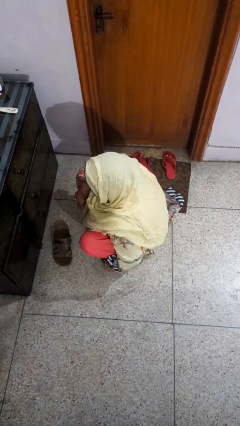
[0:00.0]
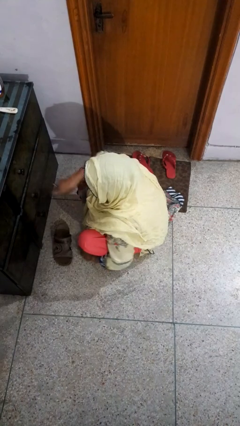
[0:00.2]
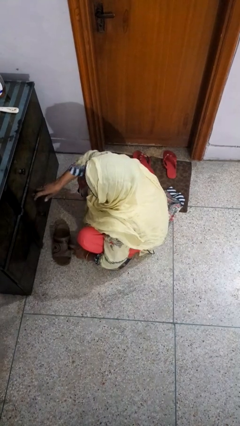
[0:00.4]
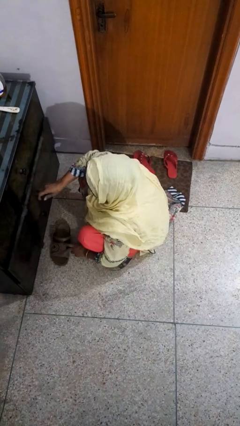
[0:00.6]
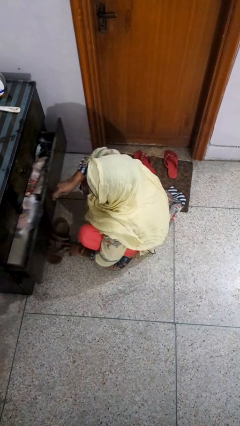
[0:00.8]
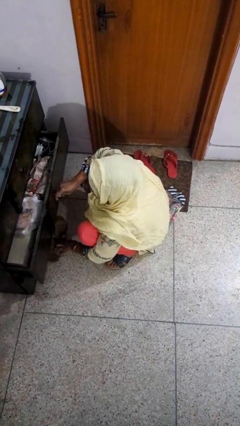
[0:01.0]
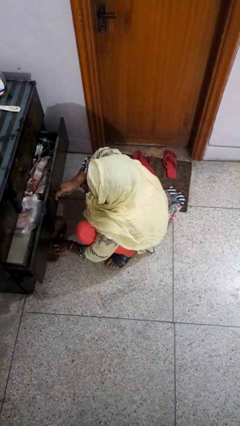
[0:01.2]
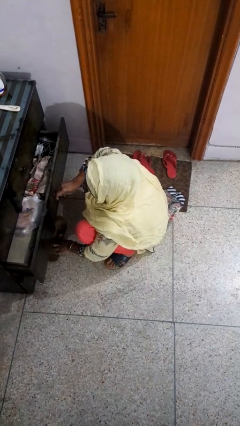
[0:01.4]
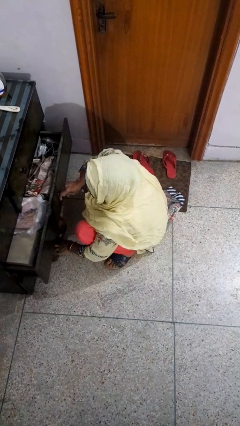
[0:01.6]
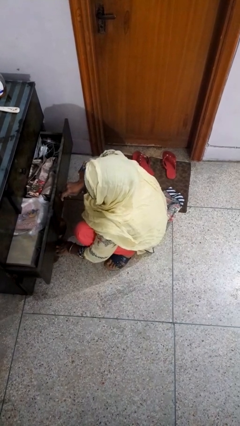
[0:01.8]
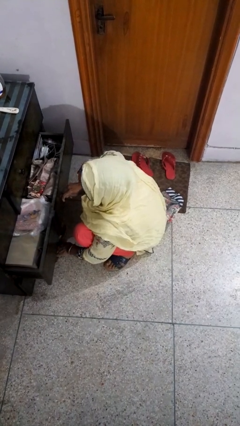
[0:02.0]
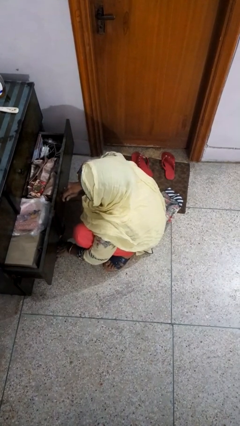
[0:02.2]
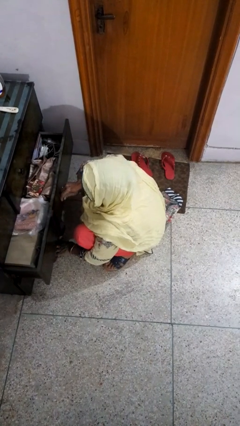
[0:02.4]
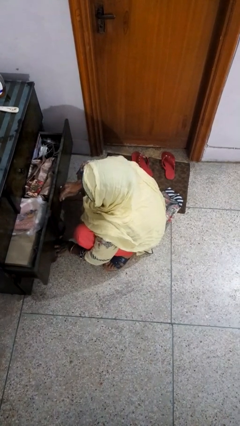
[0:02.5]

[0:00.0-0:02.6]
person opens dresser drawer

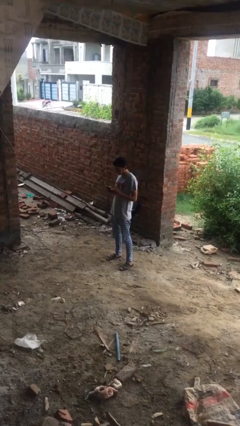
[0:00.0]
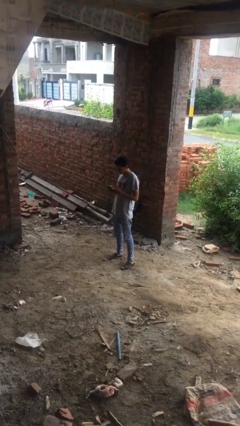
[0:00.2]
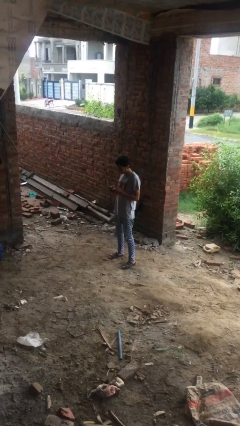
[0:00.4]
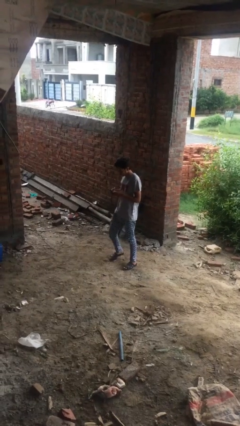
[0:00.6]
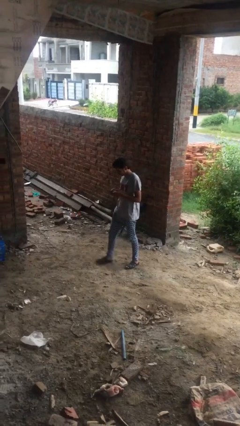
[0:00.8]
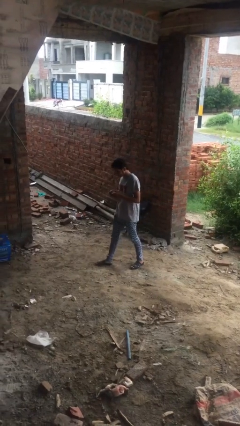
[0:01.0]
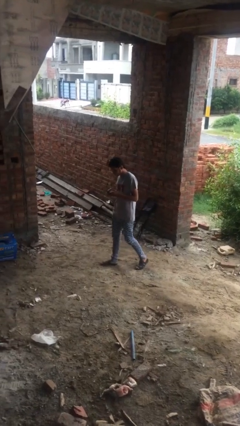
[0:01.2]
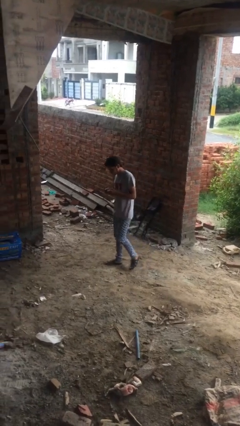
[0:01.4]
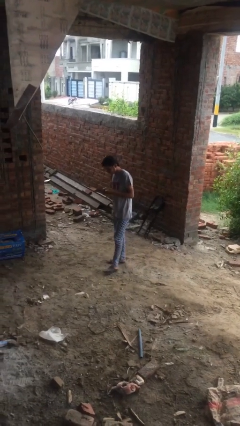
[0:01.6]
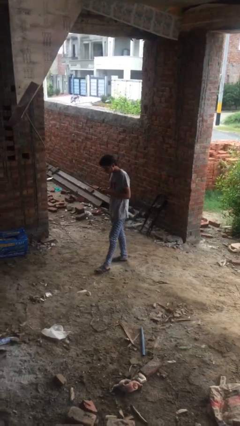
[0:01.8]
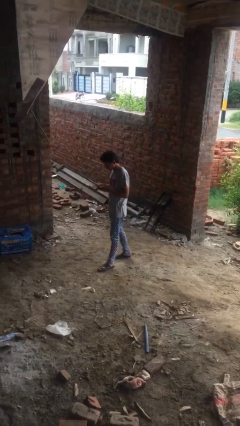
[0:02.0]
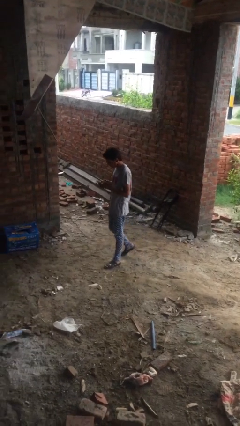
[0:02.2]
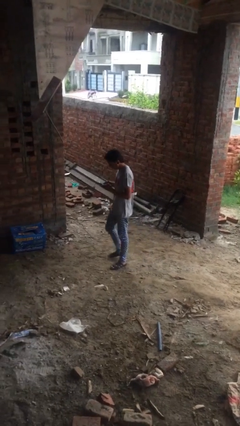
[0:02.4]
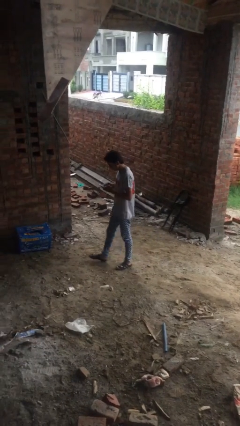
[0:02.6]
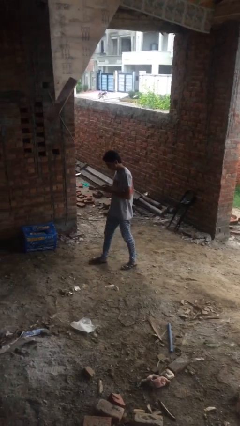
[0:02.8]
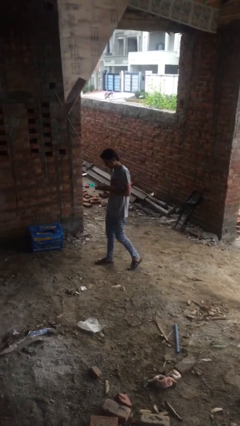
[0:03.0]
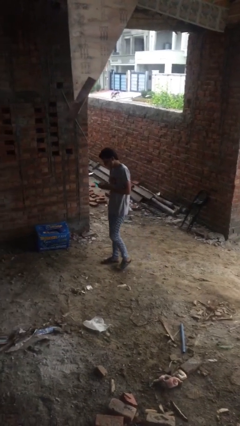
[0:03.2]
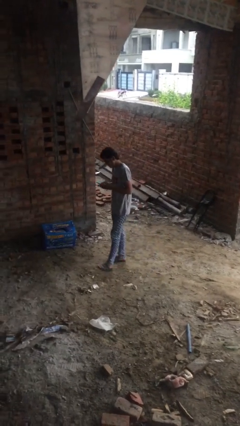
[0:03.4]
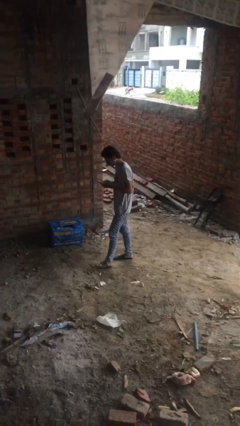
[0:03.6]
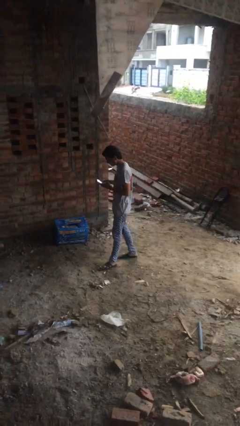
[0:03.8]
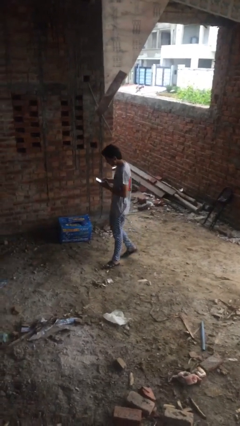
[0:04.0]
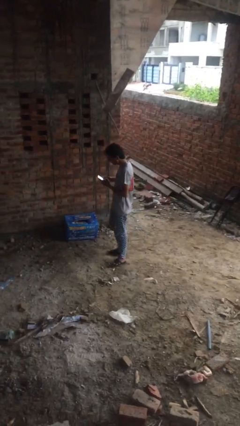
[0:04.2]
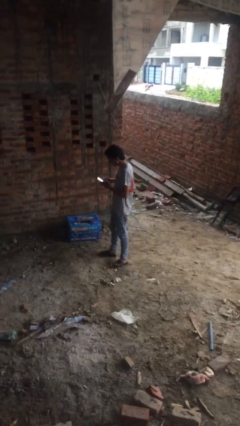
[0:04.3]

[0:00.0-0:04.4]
person texts on phone

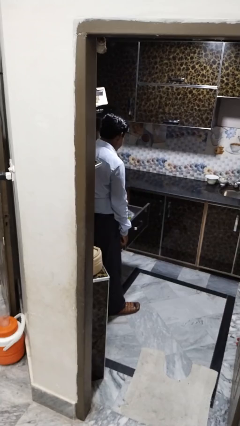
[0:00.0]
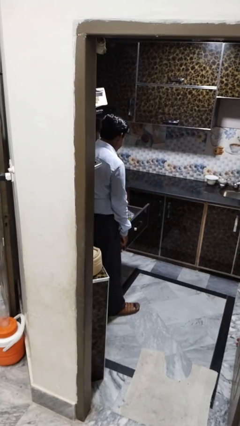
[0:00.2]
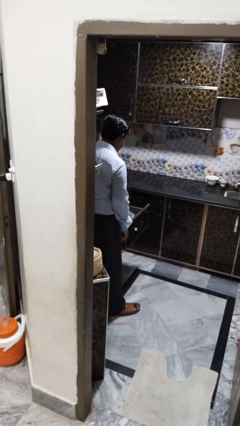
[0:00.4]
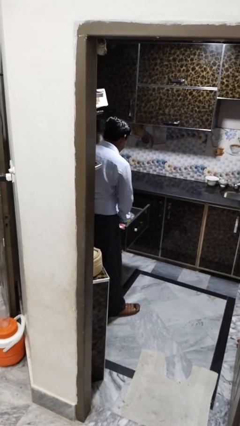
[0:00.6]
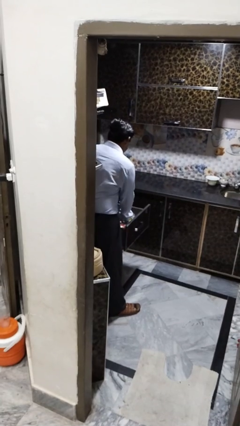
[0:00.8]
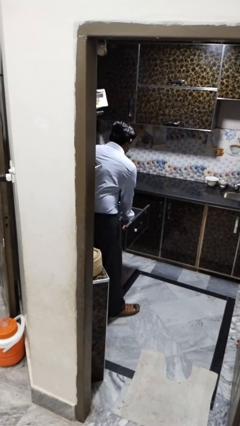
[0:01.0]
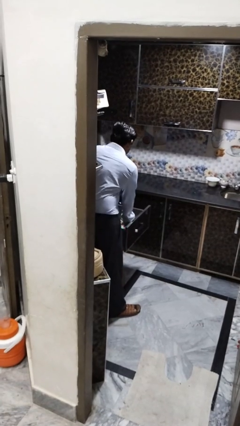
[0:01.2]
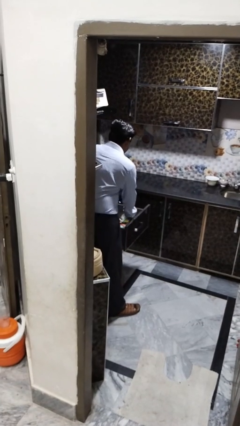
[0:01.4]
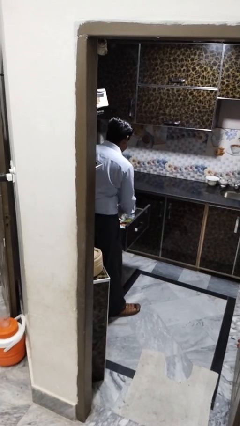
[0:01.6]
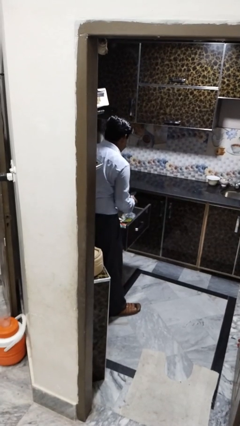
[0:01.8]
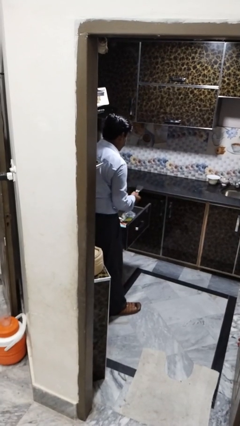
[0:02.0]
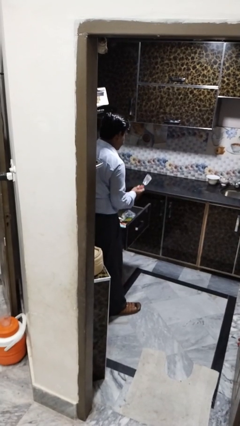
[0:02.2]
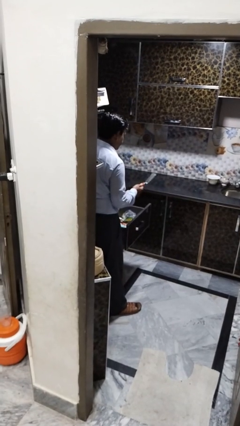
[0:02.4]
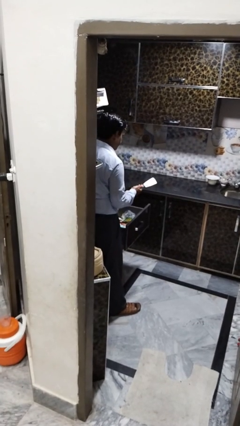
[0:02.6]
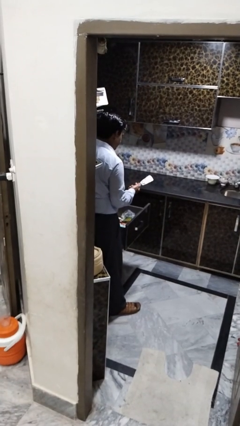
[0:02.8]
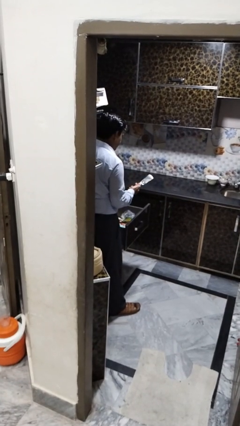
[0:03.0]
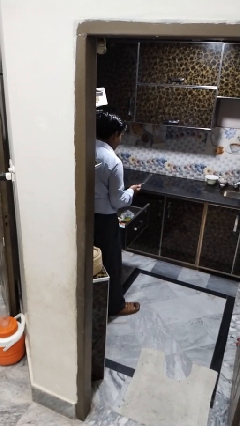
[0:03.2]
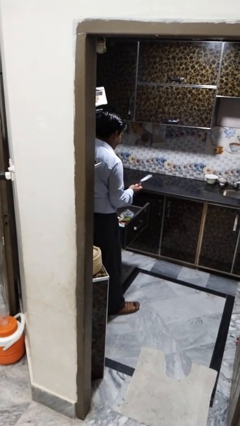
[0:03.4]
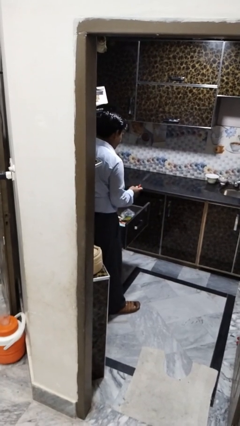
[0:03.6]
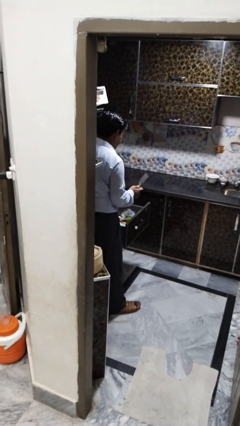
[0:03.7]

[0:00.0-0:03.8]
person takes object from kitchen drawer

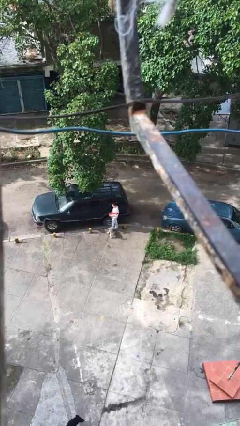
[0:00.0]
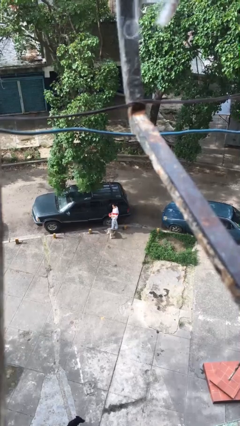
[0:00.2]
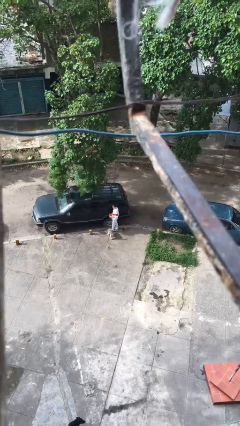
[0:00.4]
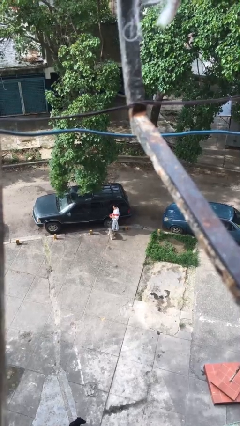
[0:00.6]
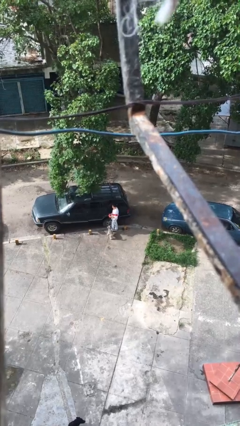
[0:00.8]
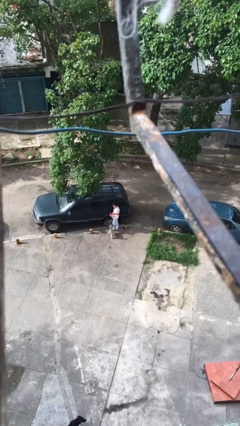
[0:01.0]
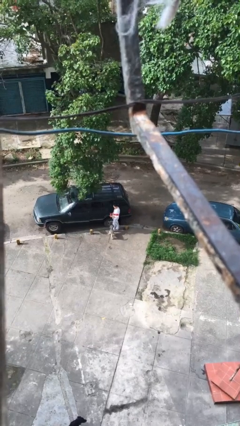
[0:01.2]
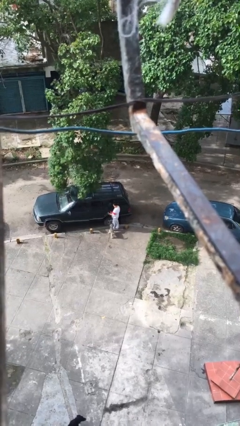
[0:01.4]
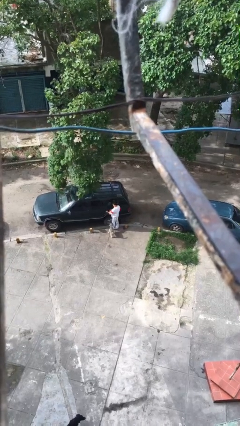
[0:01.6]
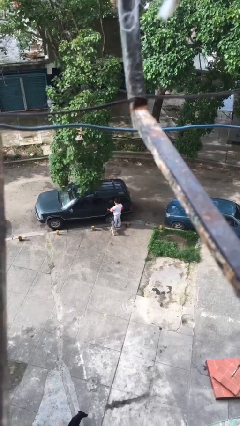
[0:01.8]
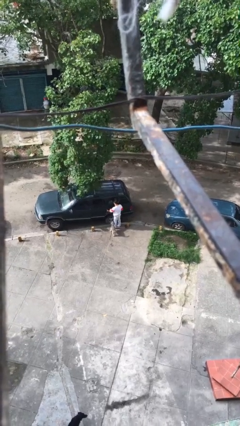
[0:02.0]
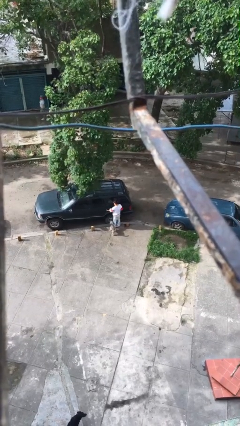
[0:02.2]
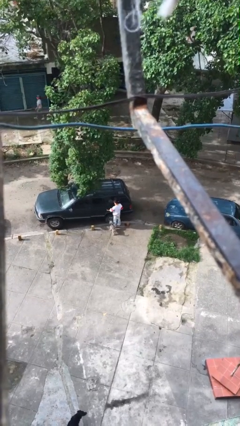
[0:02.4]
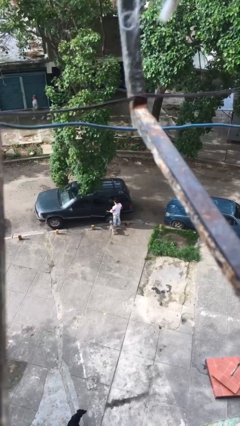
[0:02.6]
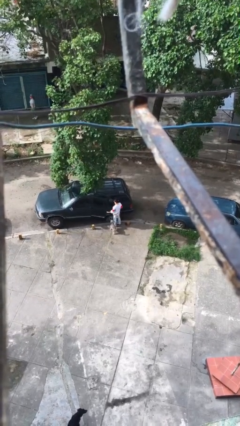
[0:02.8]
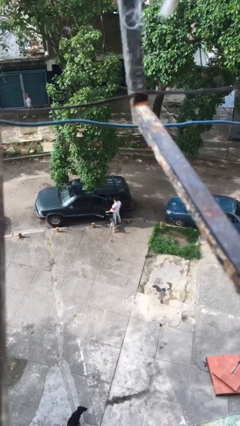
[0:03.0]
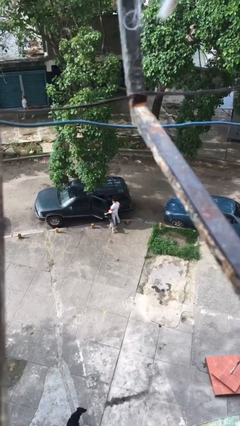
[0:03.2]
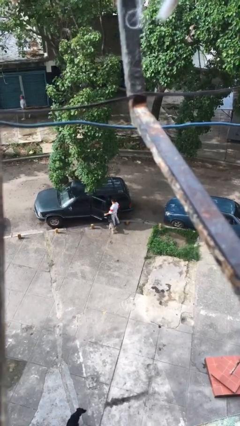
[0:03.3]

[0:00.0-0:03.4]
person opens car door

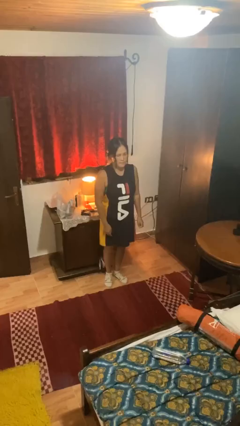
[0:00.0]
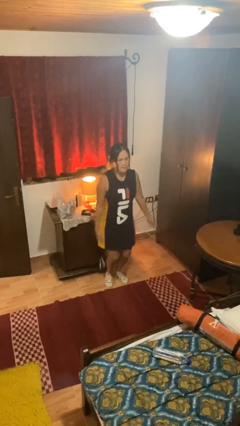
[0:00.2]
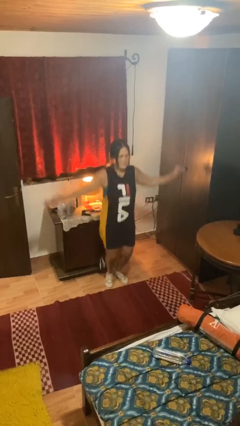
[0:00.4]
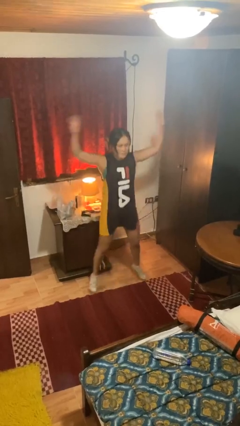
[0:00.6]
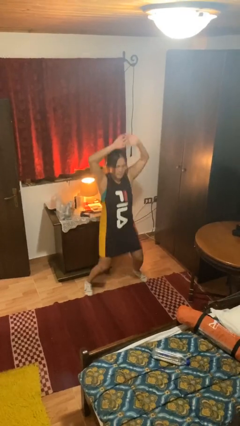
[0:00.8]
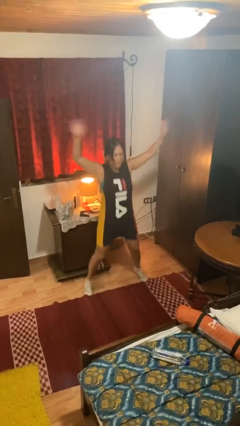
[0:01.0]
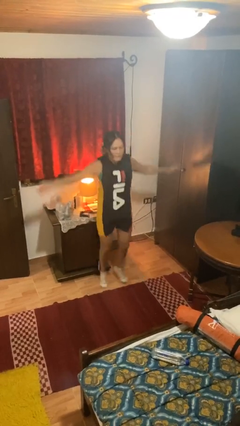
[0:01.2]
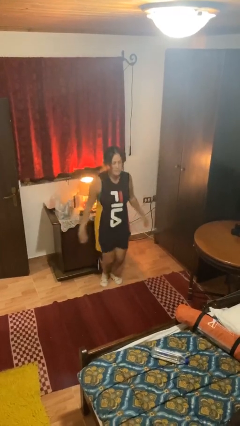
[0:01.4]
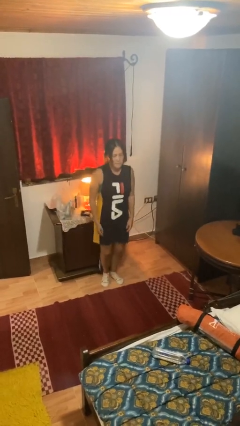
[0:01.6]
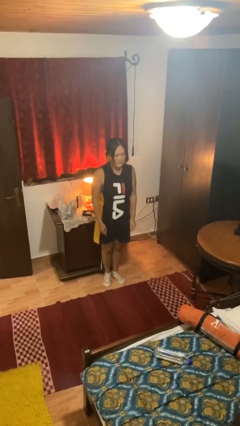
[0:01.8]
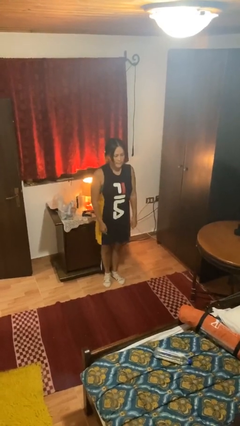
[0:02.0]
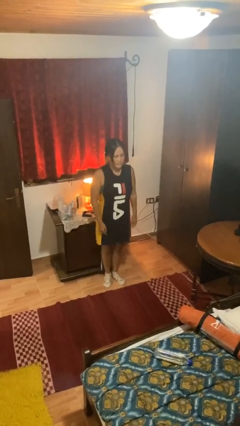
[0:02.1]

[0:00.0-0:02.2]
person exercises with jumping jacks

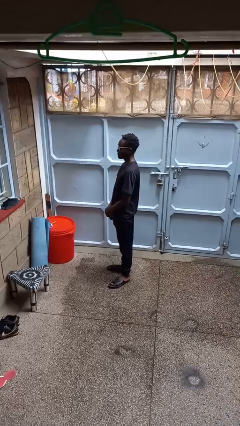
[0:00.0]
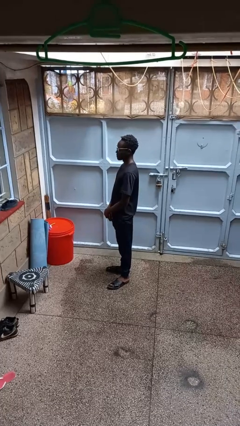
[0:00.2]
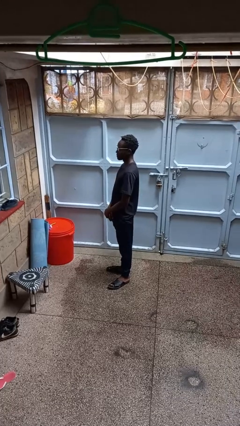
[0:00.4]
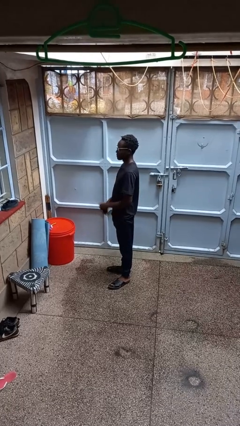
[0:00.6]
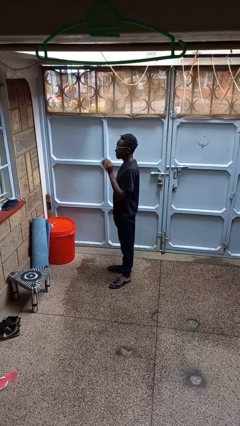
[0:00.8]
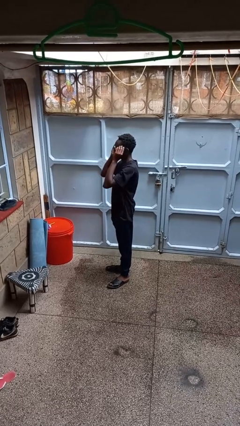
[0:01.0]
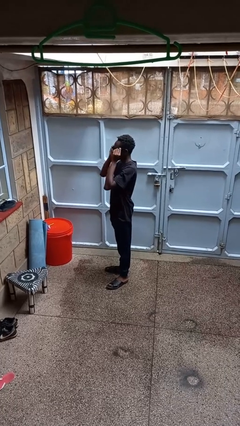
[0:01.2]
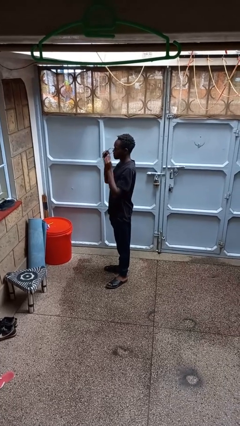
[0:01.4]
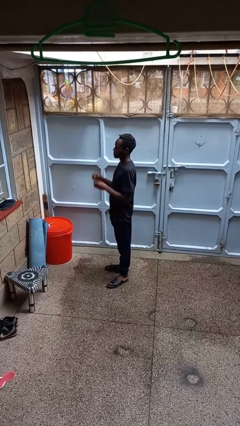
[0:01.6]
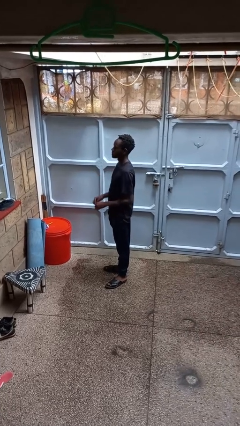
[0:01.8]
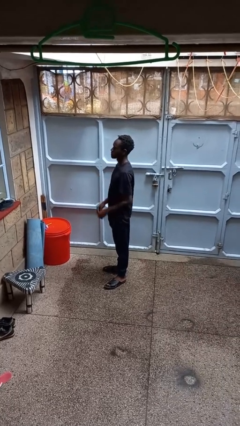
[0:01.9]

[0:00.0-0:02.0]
person takes off glasses
